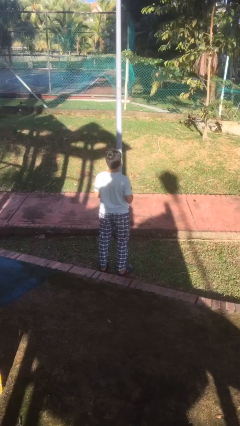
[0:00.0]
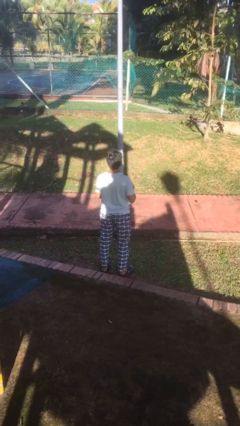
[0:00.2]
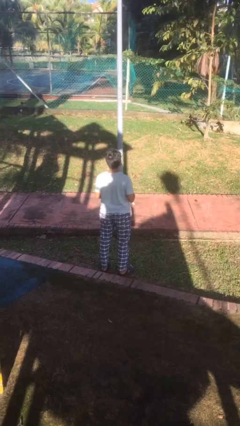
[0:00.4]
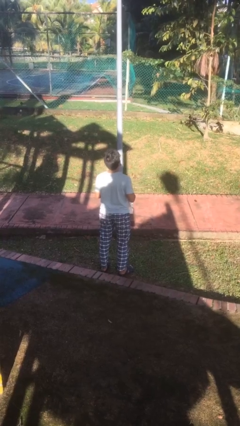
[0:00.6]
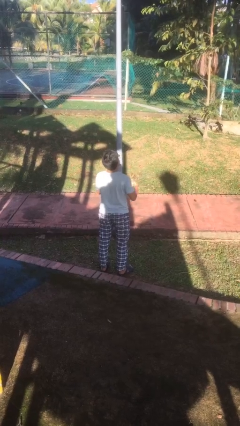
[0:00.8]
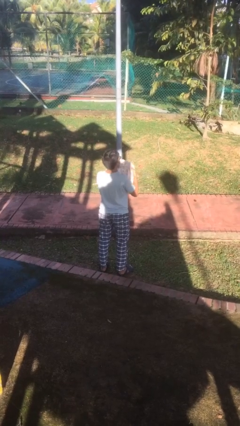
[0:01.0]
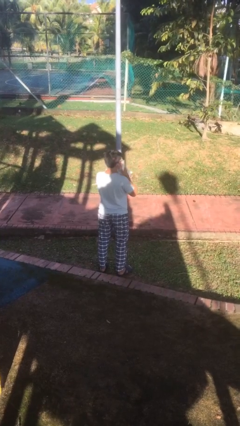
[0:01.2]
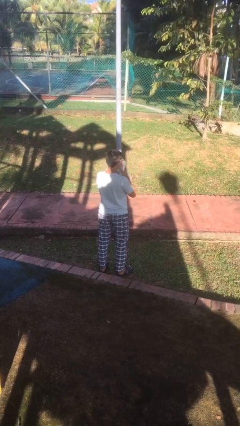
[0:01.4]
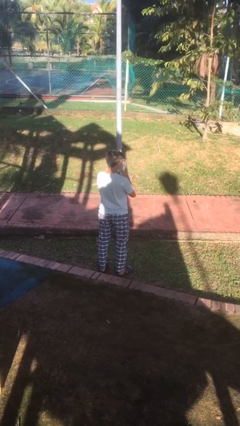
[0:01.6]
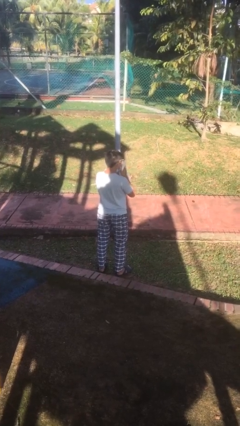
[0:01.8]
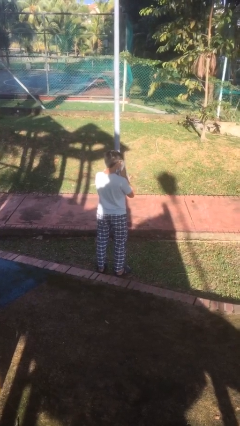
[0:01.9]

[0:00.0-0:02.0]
person blows nose

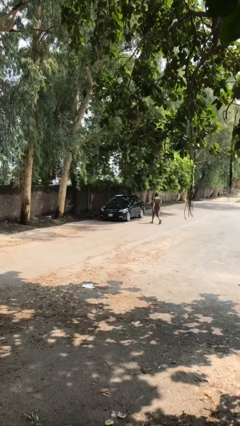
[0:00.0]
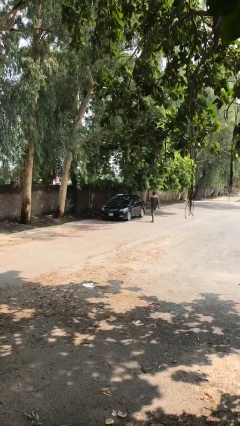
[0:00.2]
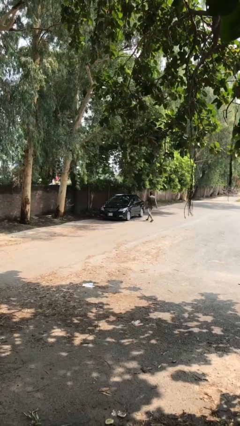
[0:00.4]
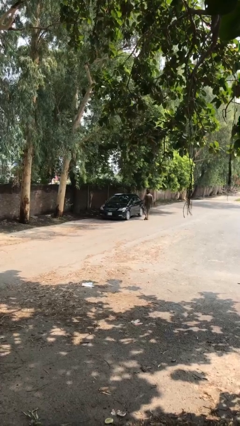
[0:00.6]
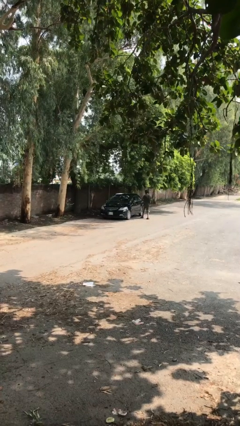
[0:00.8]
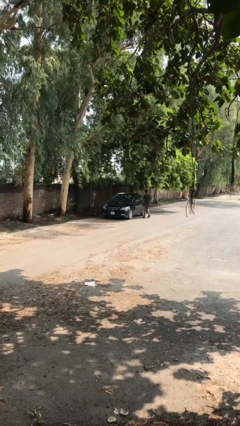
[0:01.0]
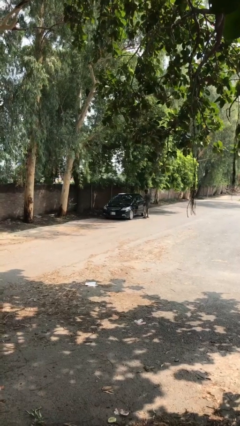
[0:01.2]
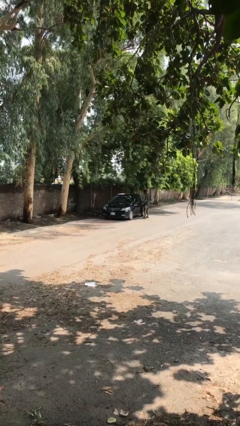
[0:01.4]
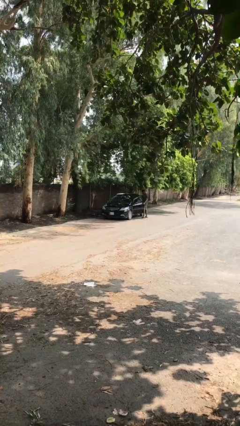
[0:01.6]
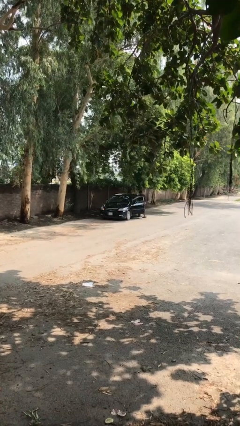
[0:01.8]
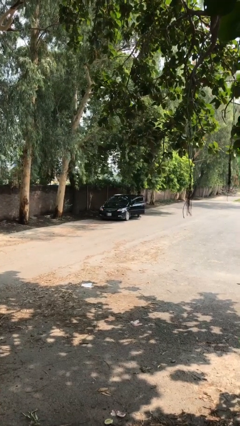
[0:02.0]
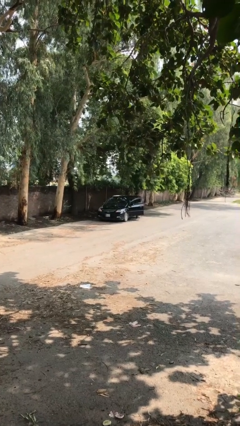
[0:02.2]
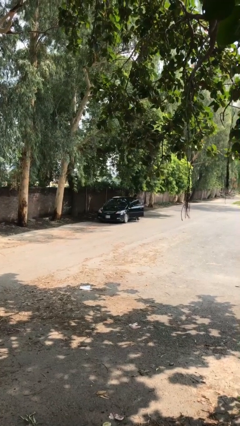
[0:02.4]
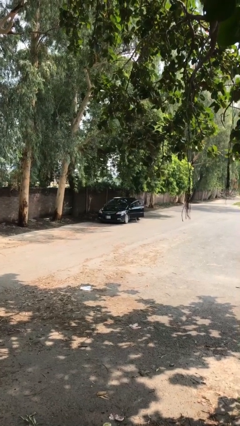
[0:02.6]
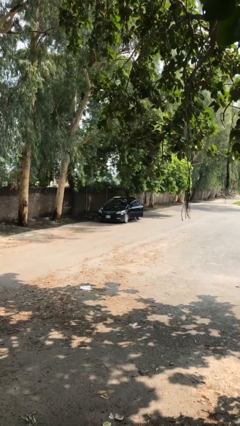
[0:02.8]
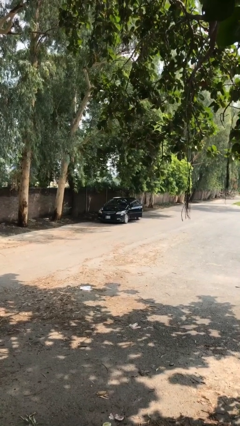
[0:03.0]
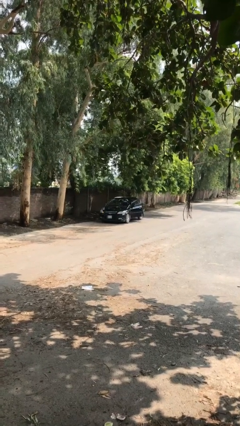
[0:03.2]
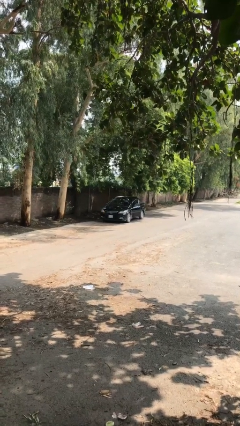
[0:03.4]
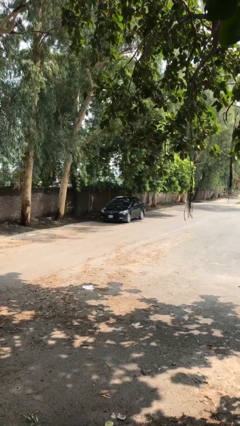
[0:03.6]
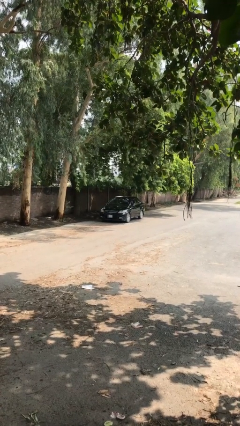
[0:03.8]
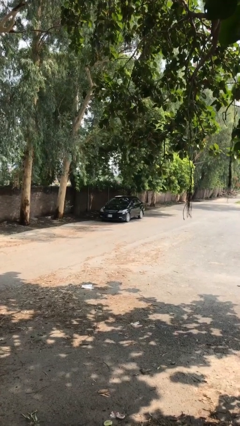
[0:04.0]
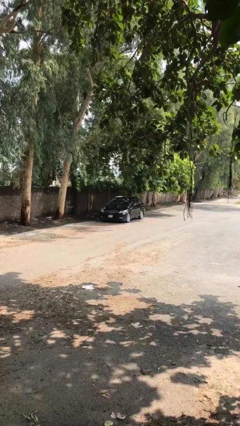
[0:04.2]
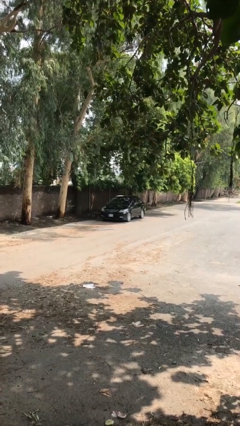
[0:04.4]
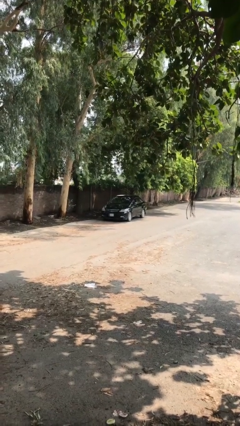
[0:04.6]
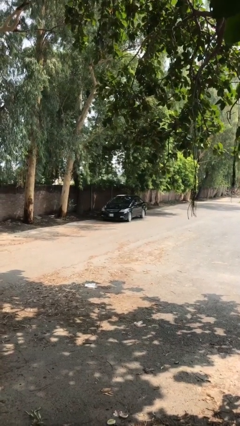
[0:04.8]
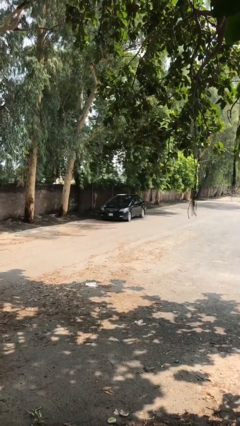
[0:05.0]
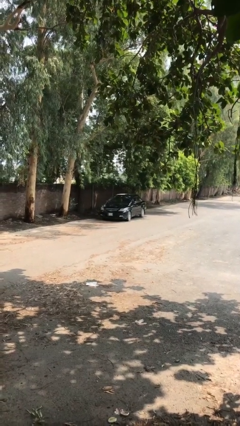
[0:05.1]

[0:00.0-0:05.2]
car picks up person

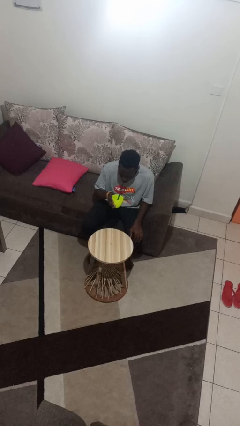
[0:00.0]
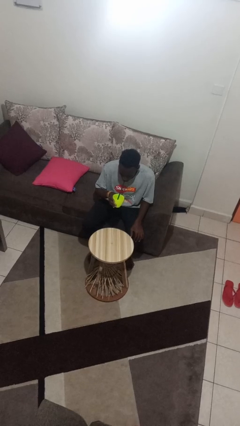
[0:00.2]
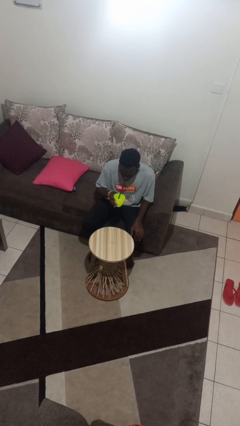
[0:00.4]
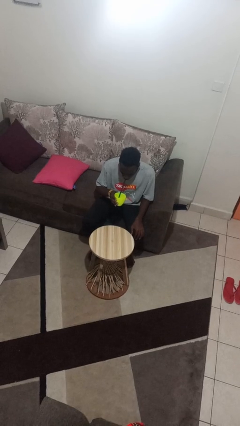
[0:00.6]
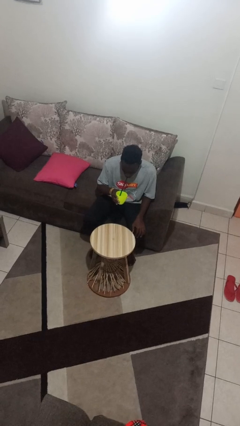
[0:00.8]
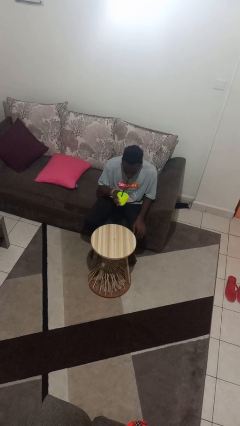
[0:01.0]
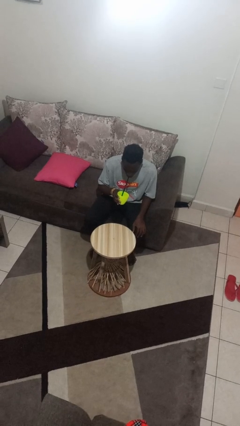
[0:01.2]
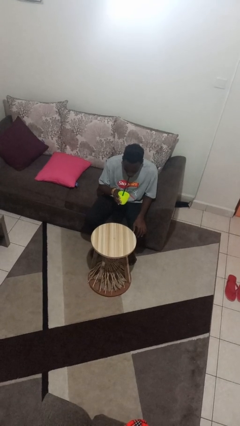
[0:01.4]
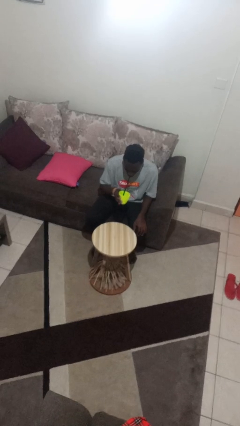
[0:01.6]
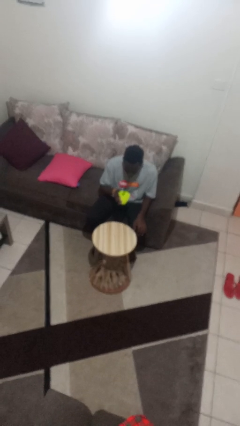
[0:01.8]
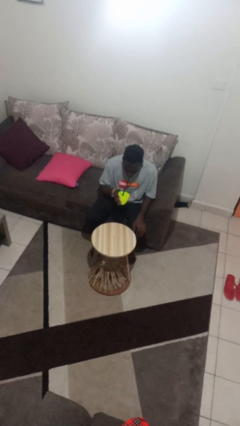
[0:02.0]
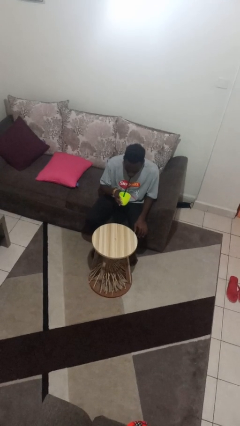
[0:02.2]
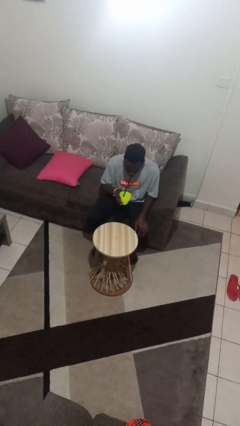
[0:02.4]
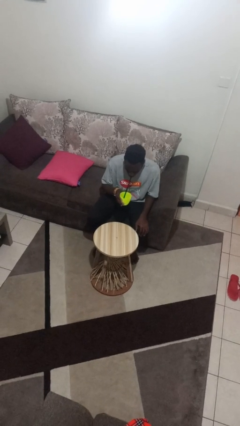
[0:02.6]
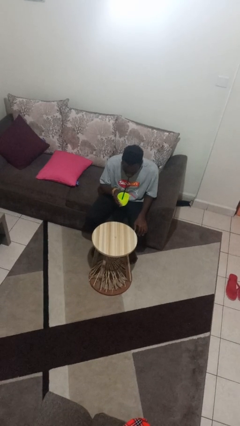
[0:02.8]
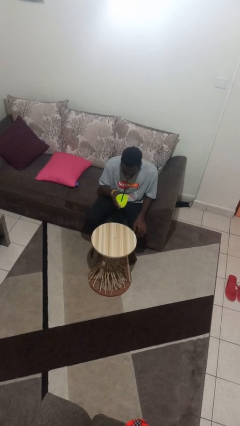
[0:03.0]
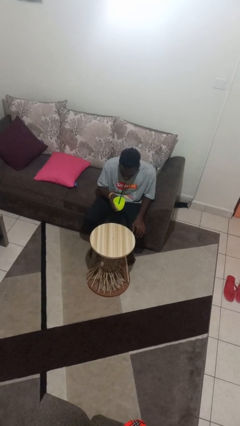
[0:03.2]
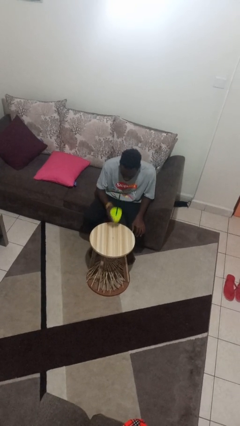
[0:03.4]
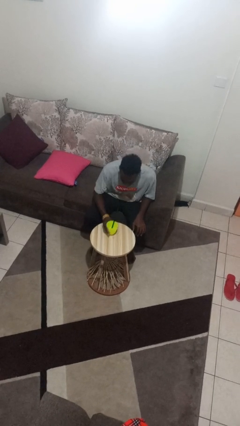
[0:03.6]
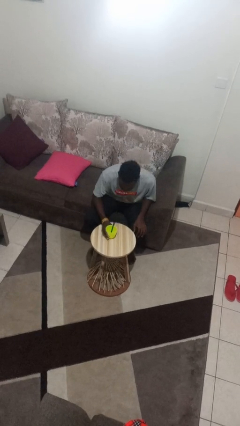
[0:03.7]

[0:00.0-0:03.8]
person drinks from straw

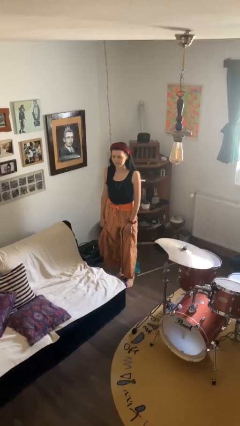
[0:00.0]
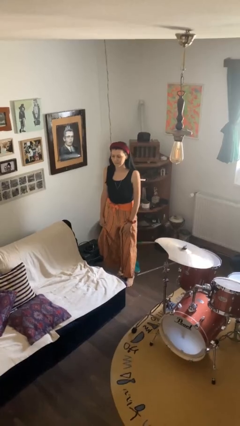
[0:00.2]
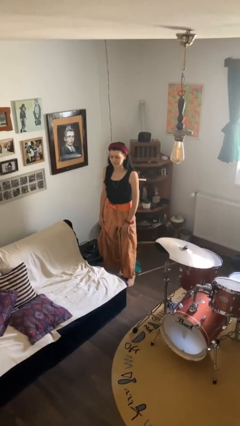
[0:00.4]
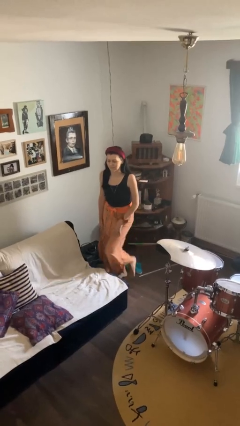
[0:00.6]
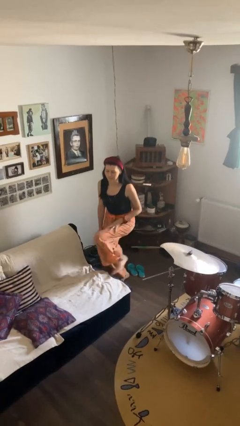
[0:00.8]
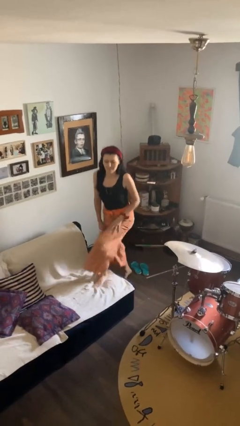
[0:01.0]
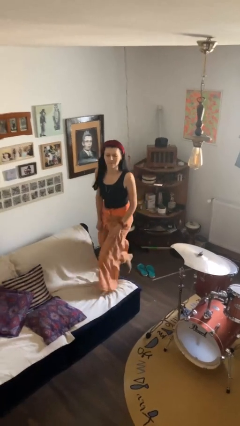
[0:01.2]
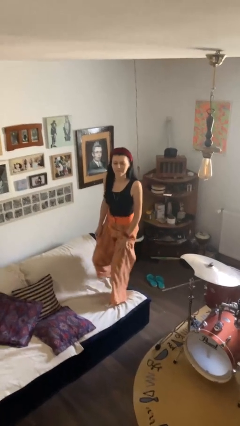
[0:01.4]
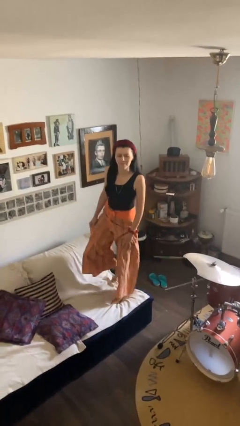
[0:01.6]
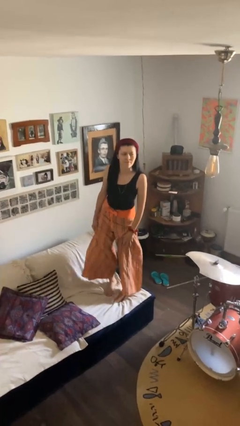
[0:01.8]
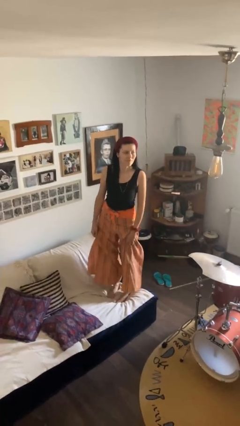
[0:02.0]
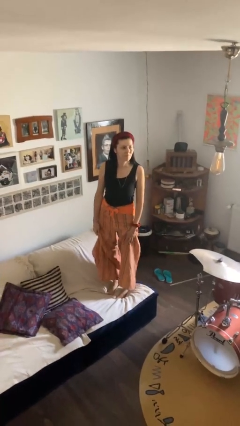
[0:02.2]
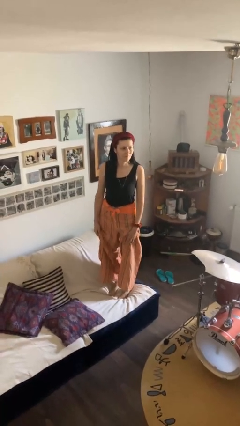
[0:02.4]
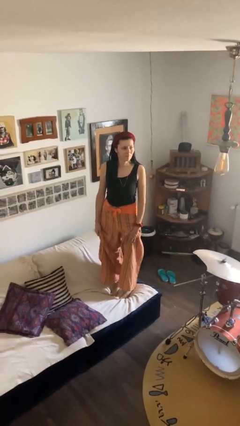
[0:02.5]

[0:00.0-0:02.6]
person climbs on couch

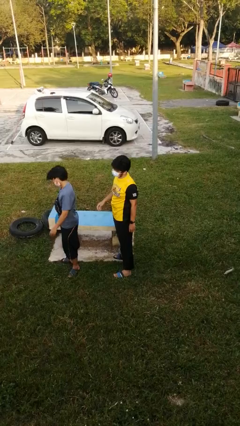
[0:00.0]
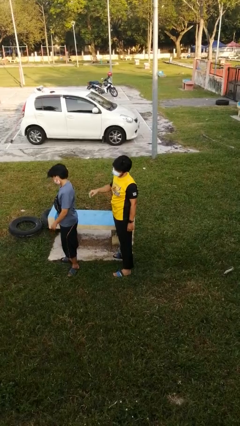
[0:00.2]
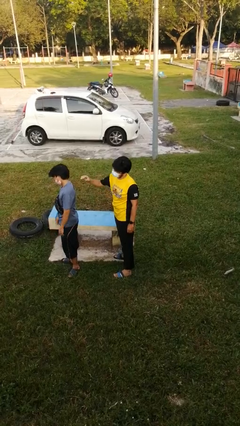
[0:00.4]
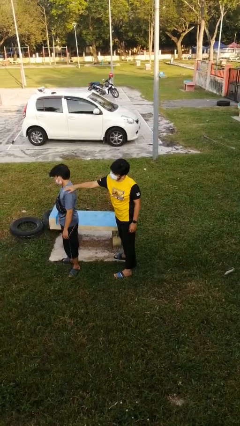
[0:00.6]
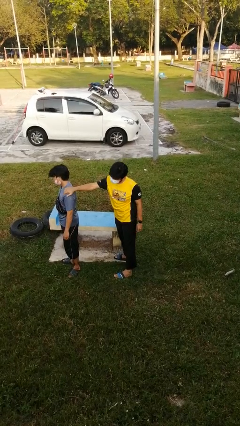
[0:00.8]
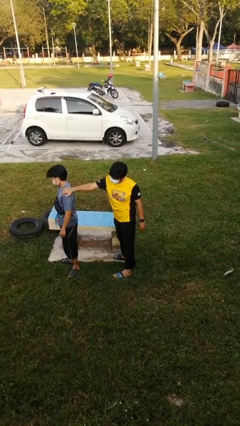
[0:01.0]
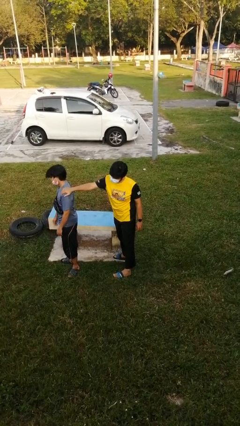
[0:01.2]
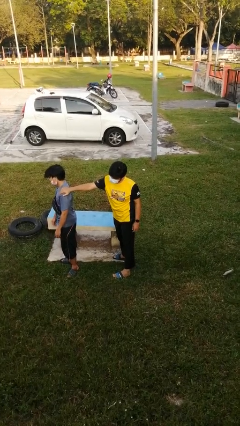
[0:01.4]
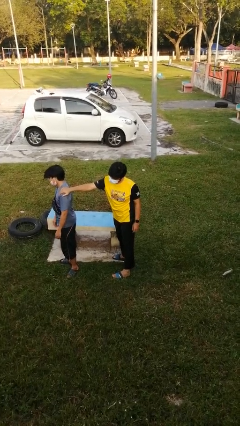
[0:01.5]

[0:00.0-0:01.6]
person grabs person by shoulder

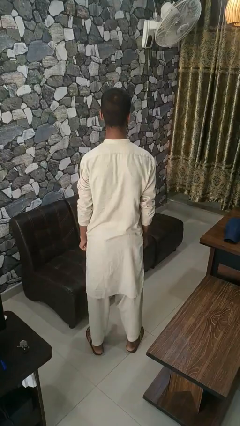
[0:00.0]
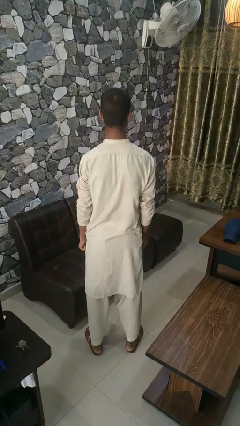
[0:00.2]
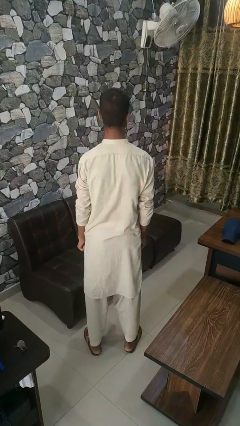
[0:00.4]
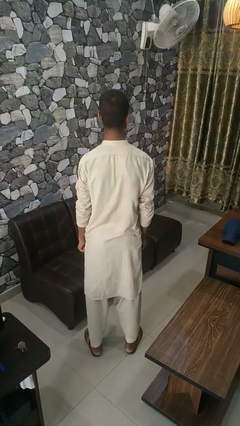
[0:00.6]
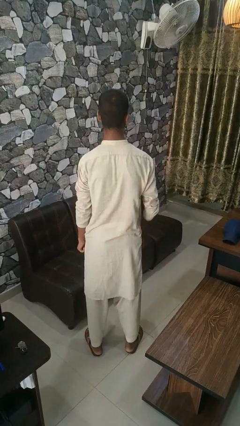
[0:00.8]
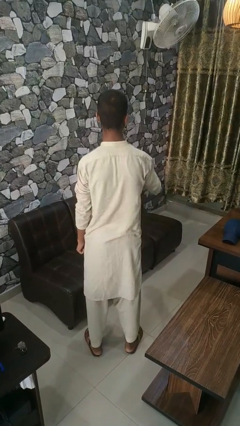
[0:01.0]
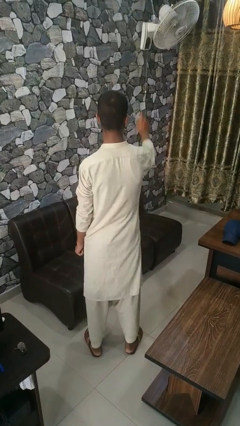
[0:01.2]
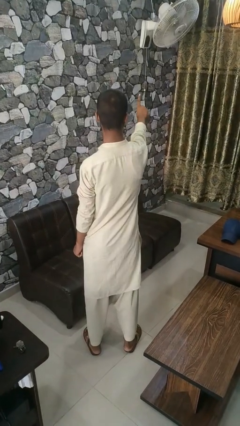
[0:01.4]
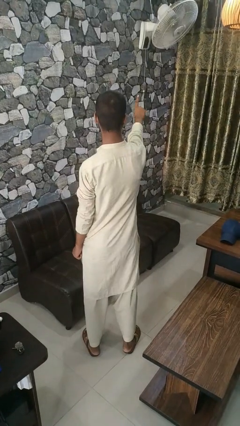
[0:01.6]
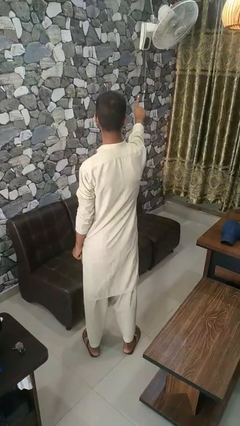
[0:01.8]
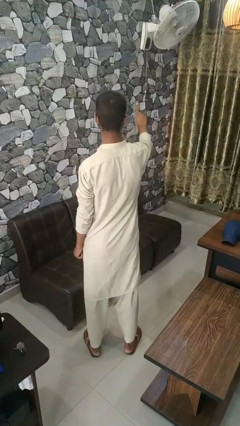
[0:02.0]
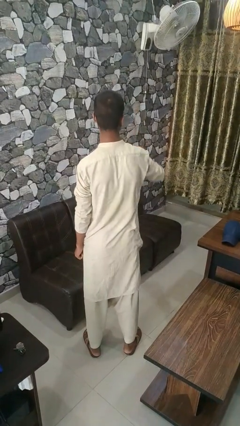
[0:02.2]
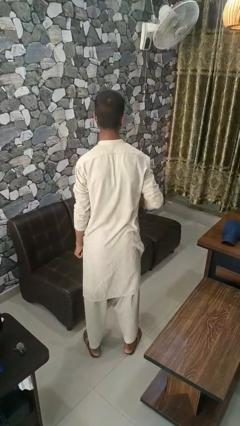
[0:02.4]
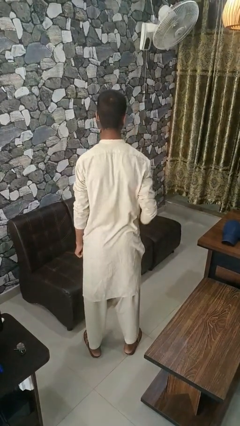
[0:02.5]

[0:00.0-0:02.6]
person gestures number one
